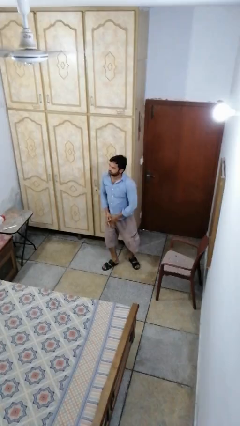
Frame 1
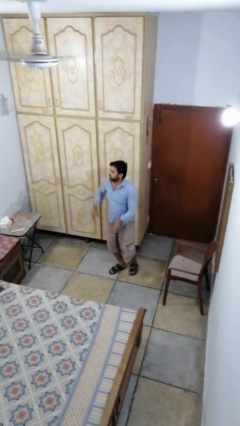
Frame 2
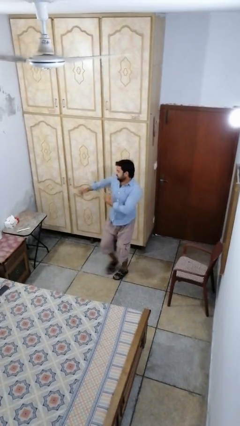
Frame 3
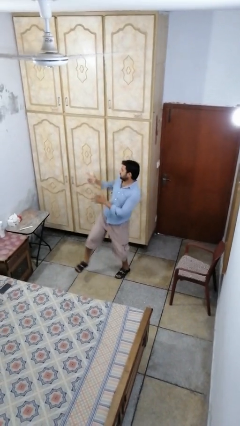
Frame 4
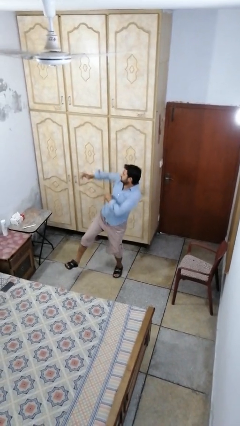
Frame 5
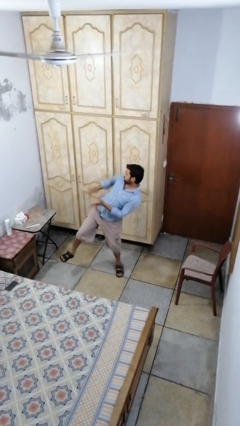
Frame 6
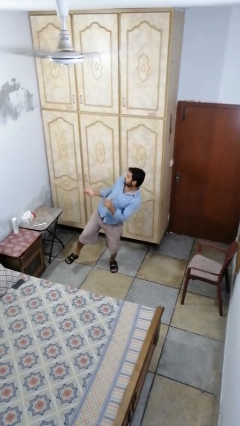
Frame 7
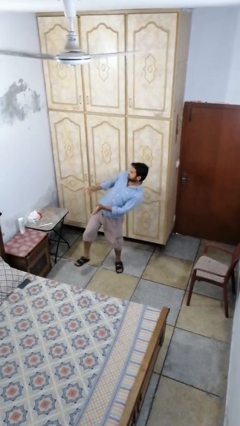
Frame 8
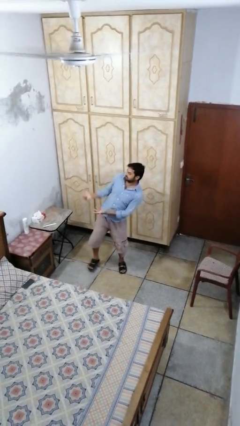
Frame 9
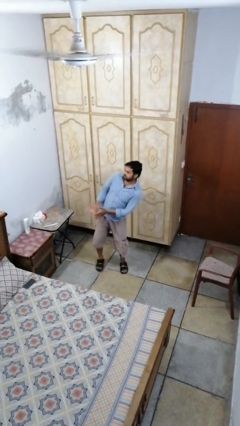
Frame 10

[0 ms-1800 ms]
person dances in place

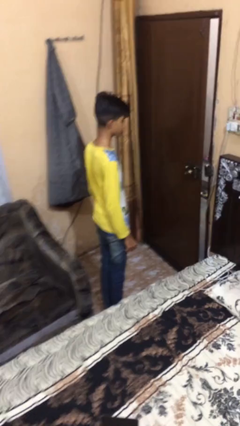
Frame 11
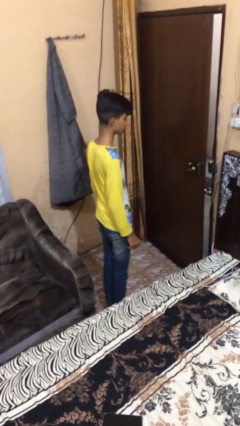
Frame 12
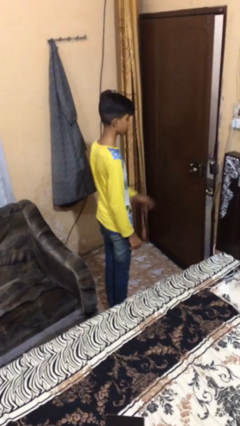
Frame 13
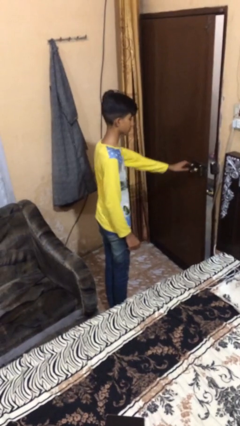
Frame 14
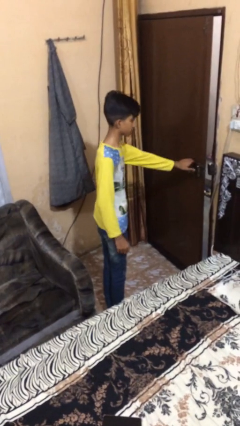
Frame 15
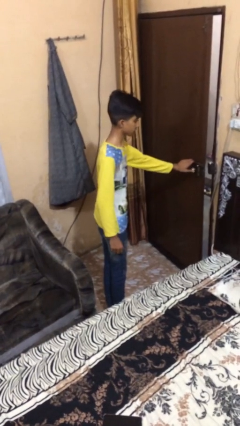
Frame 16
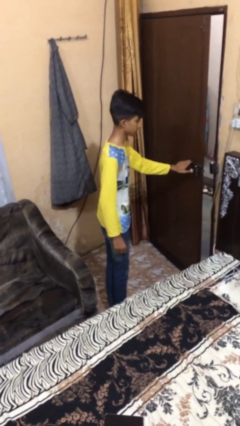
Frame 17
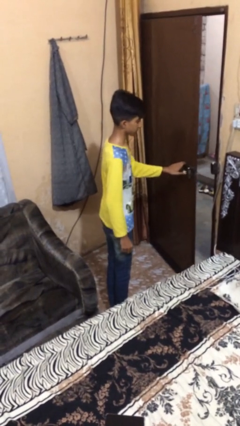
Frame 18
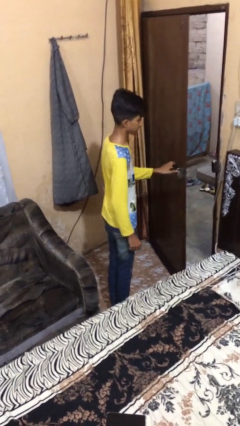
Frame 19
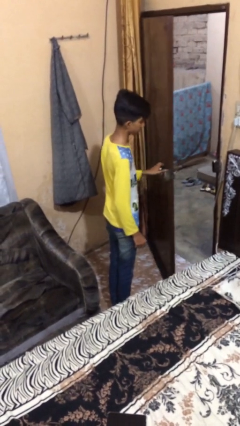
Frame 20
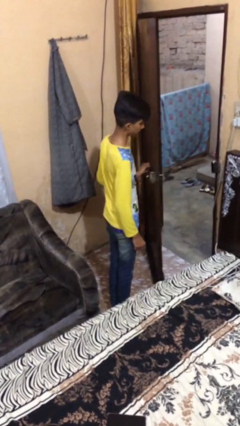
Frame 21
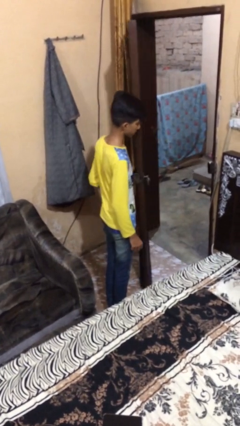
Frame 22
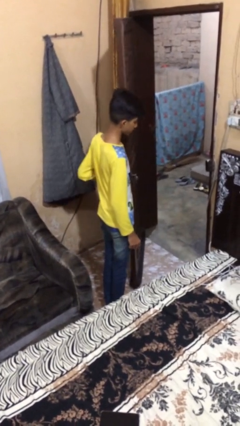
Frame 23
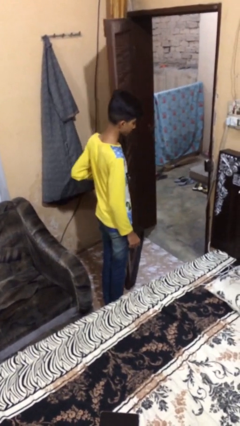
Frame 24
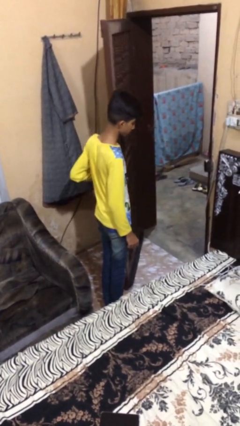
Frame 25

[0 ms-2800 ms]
person opens facility door

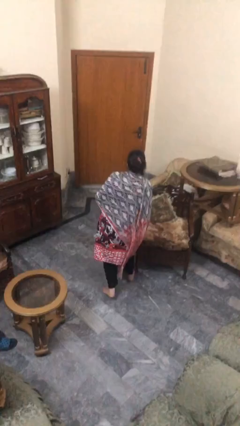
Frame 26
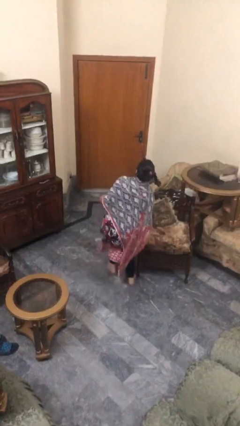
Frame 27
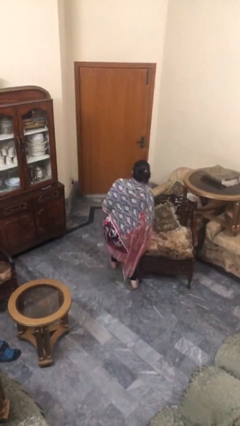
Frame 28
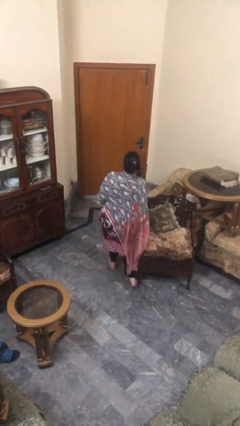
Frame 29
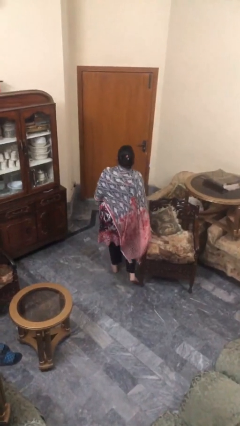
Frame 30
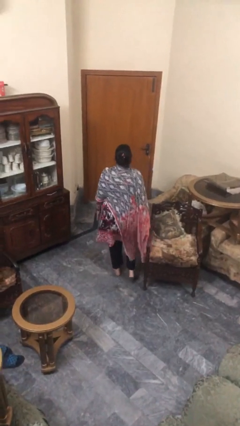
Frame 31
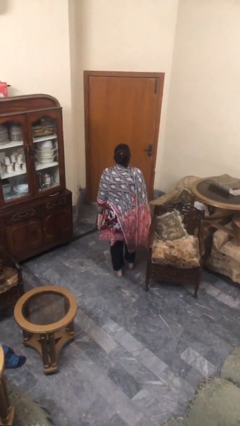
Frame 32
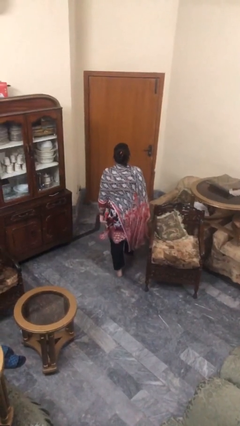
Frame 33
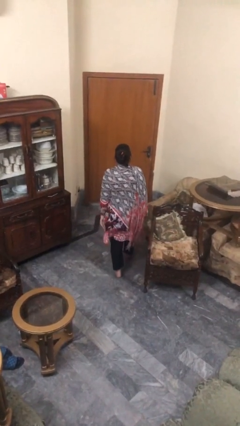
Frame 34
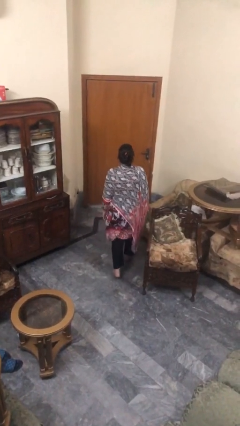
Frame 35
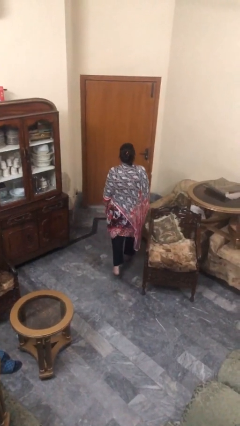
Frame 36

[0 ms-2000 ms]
person stubs toe

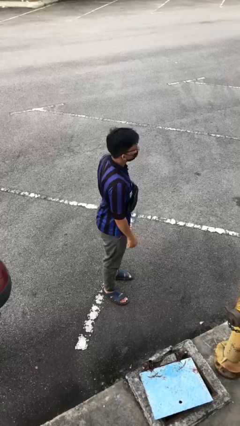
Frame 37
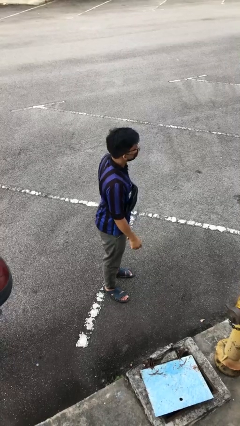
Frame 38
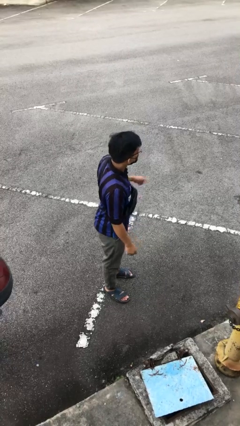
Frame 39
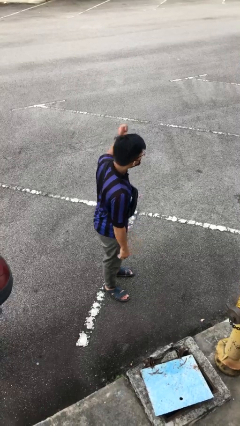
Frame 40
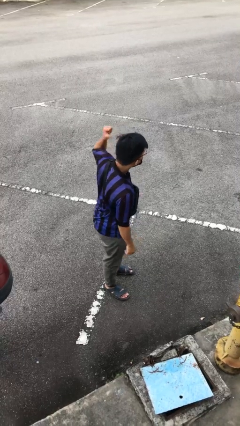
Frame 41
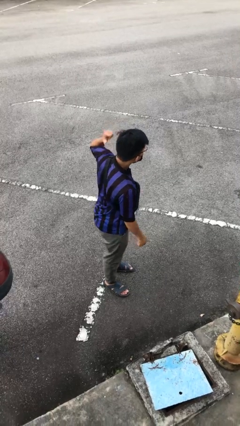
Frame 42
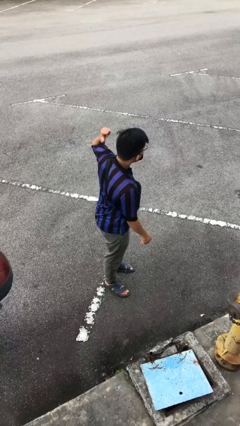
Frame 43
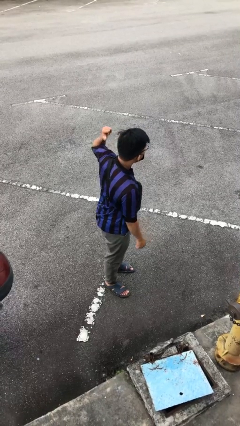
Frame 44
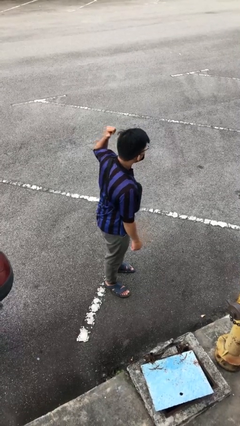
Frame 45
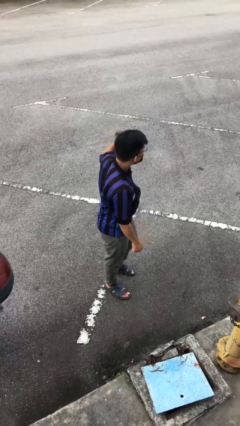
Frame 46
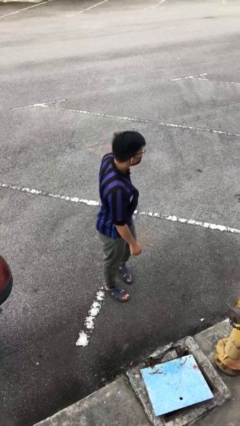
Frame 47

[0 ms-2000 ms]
person gestures behind me

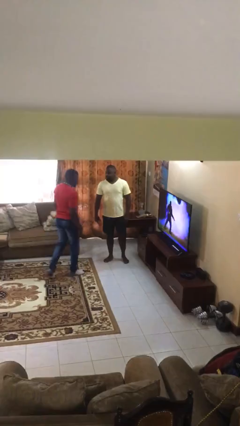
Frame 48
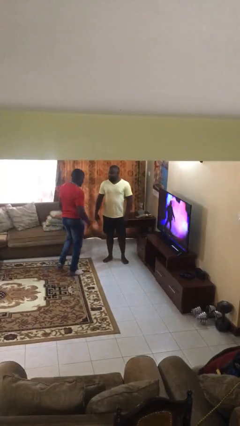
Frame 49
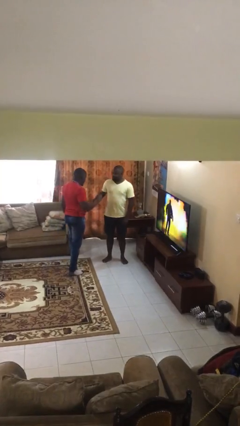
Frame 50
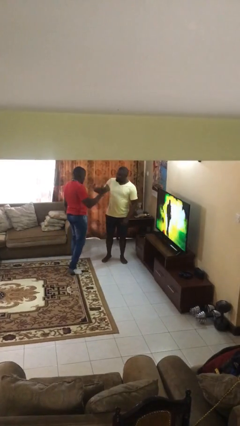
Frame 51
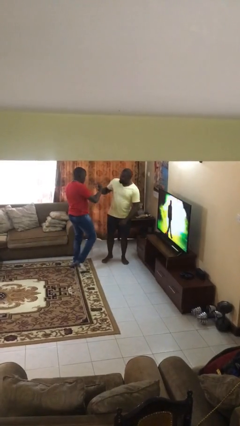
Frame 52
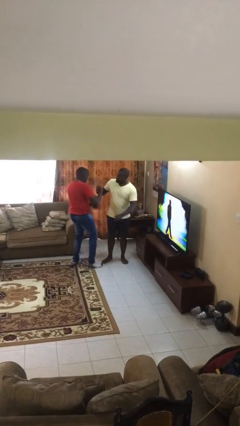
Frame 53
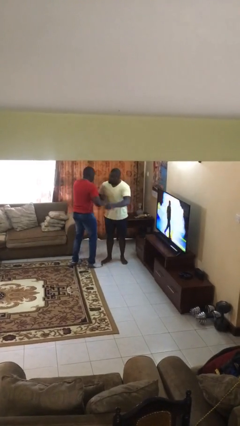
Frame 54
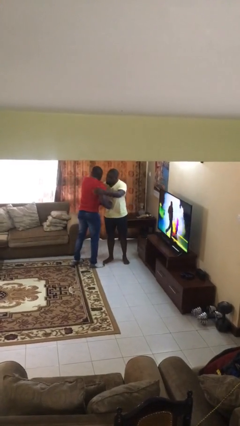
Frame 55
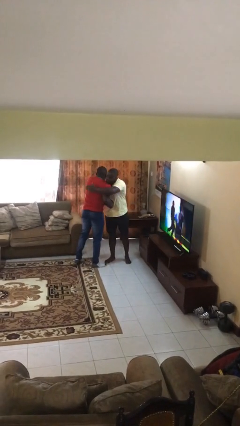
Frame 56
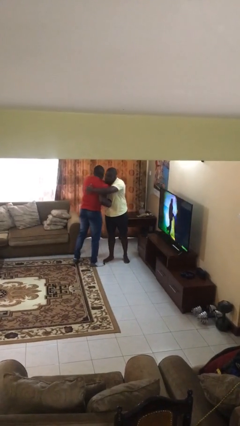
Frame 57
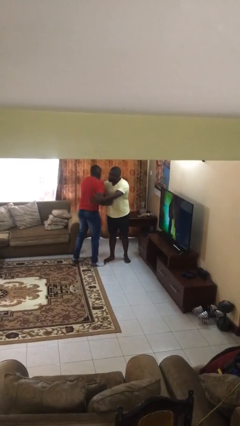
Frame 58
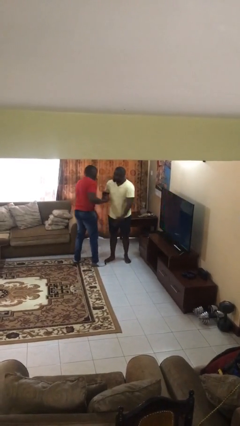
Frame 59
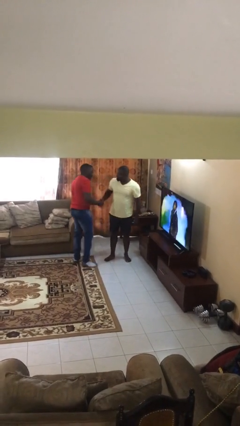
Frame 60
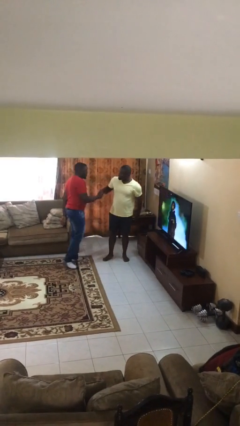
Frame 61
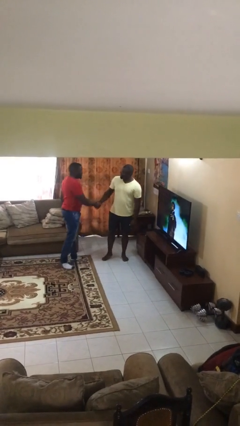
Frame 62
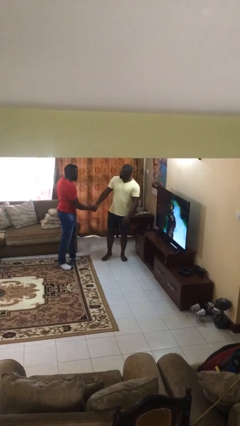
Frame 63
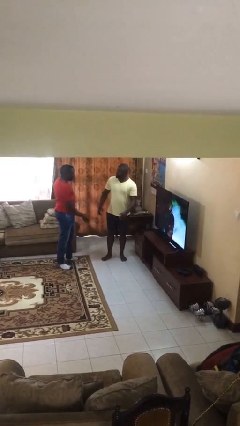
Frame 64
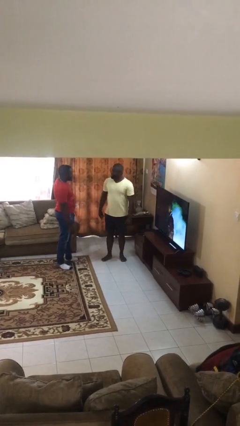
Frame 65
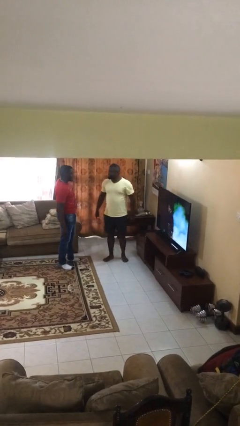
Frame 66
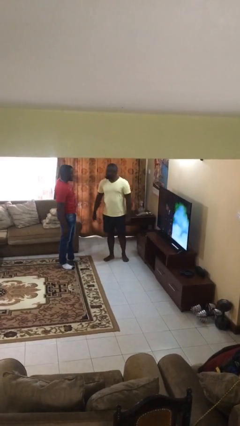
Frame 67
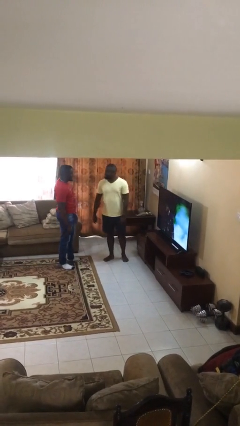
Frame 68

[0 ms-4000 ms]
person embraces person

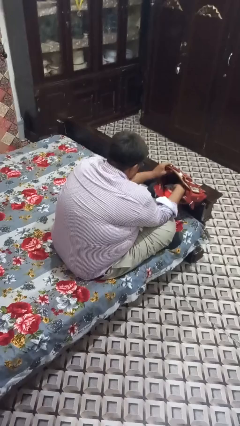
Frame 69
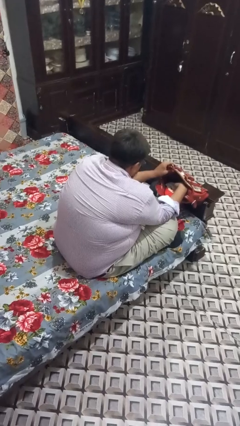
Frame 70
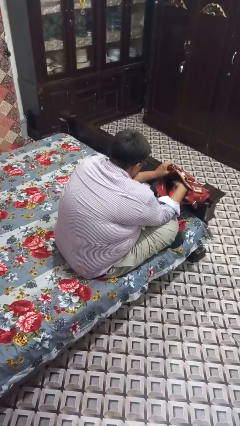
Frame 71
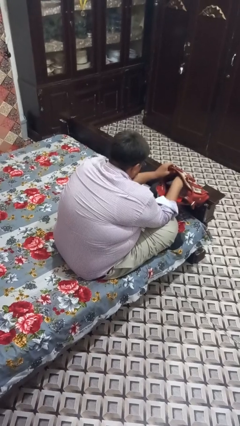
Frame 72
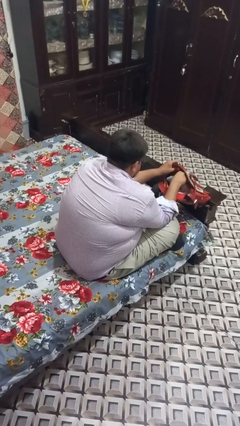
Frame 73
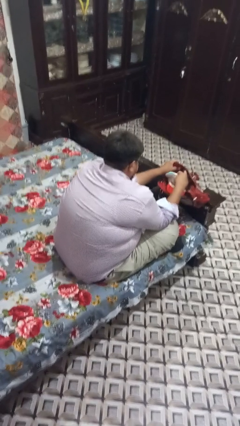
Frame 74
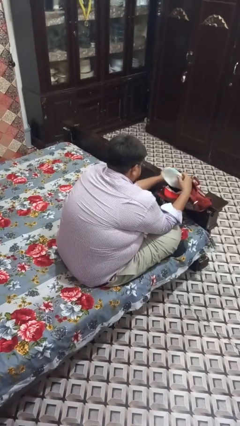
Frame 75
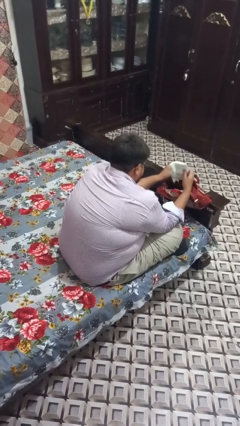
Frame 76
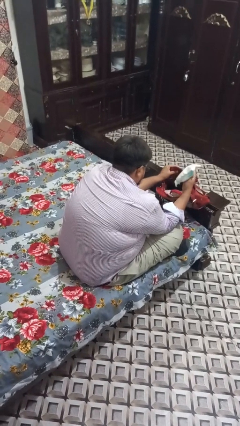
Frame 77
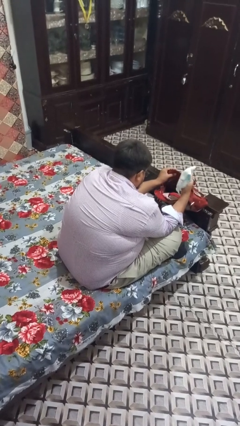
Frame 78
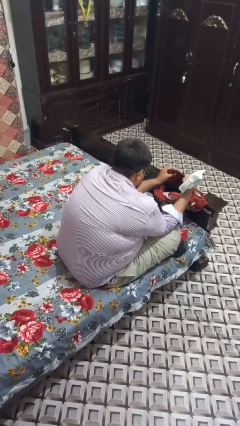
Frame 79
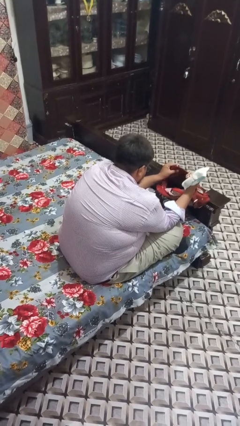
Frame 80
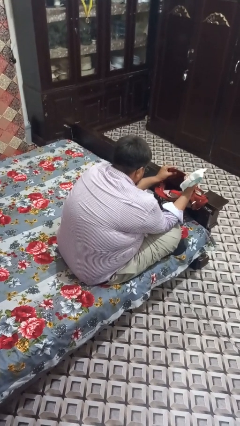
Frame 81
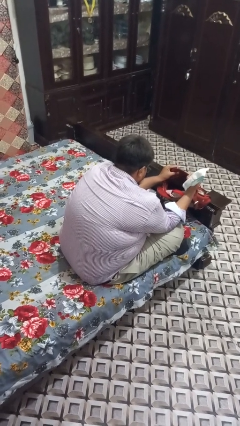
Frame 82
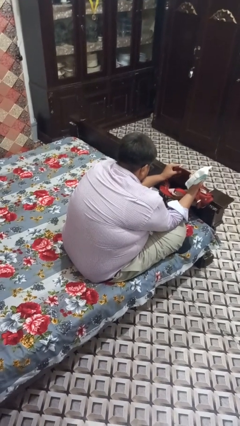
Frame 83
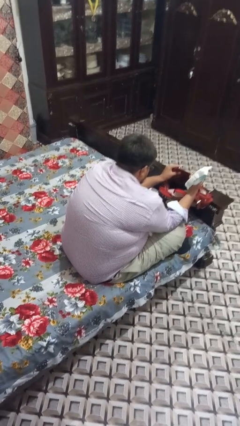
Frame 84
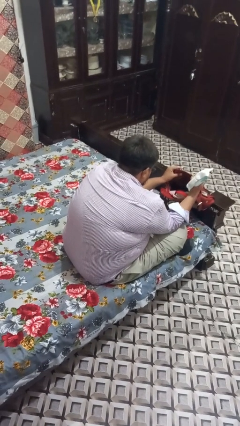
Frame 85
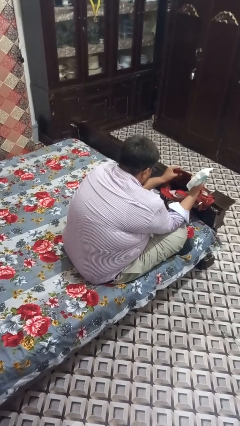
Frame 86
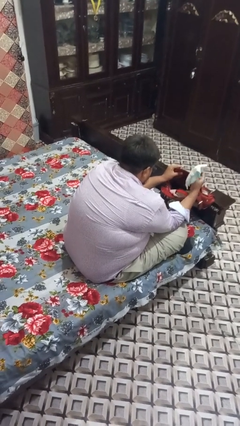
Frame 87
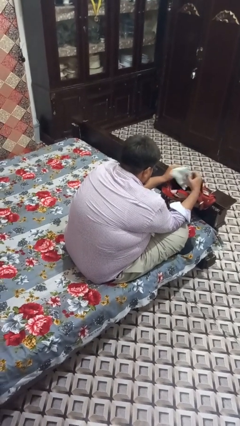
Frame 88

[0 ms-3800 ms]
person takes object from purse

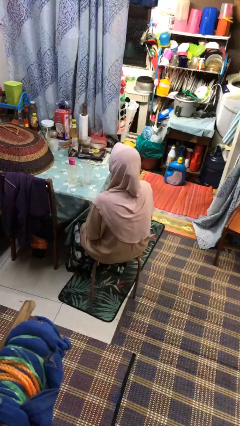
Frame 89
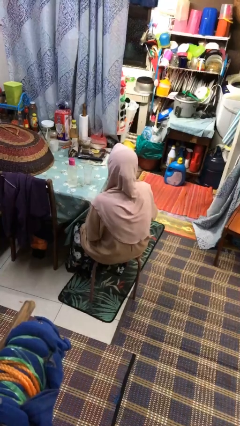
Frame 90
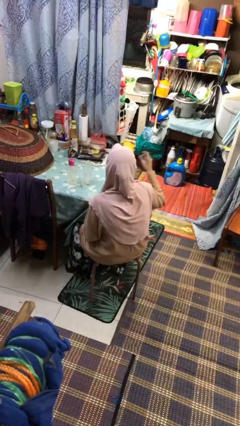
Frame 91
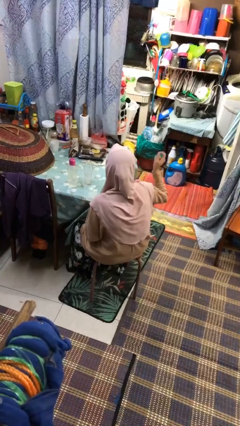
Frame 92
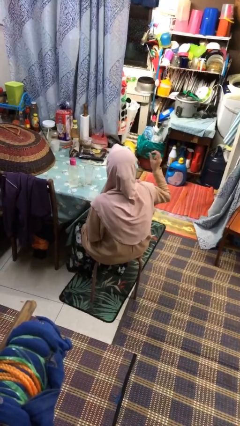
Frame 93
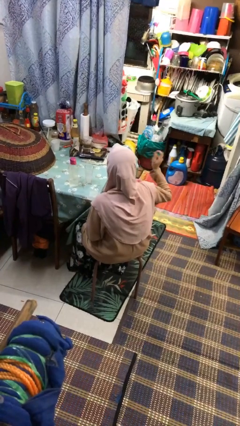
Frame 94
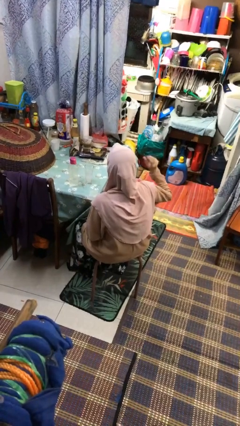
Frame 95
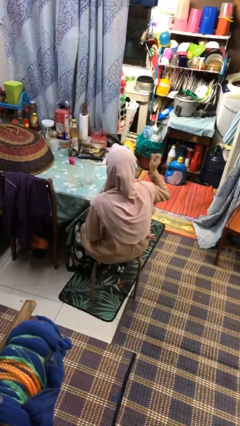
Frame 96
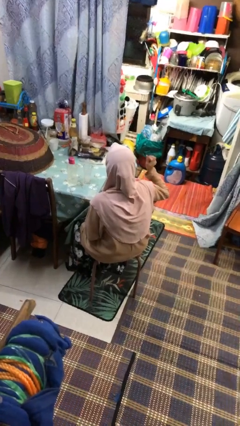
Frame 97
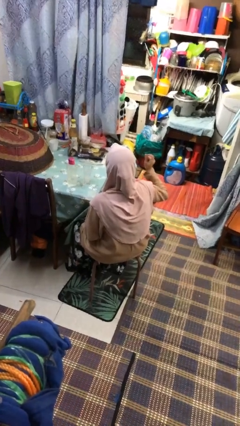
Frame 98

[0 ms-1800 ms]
person snaps fingers
